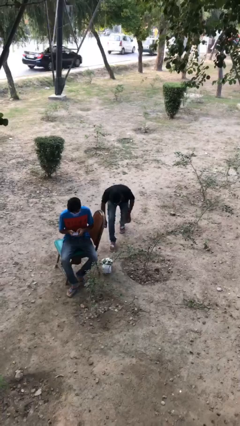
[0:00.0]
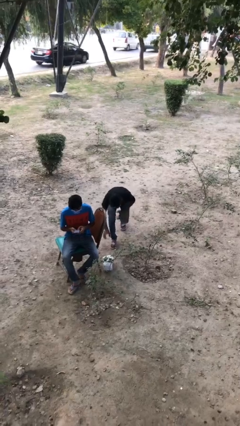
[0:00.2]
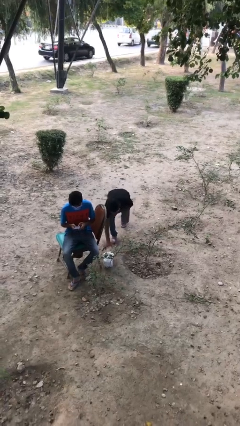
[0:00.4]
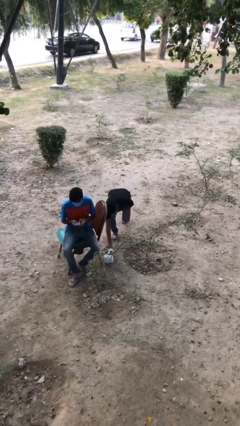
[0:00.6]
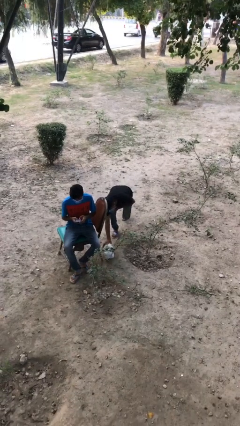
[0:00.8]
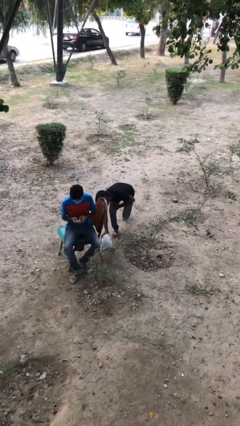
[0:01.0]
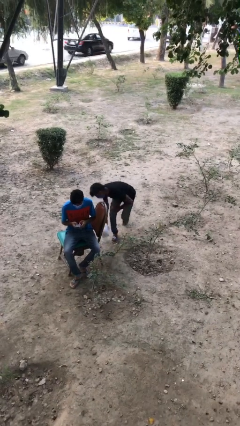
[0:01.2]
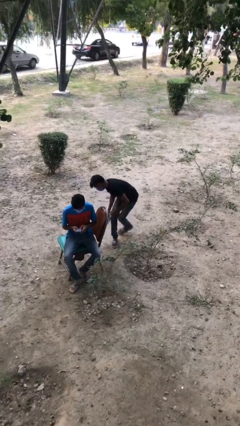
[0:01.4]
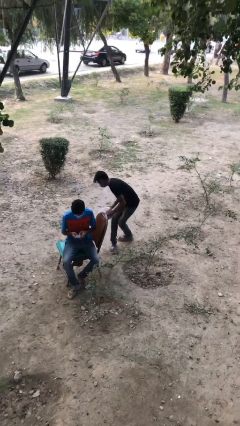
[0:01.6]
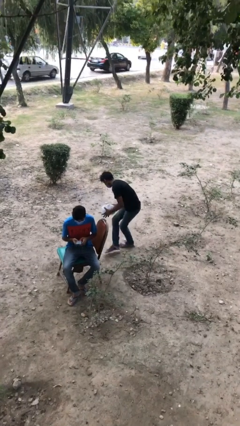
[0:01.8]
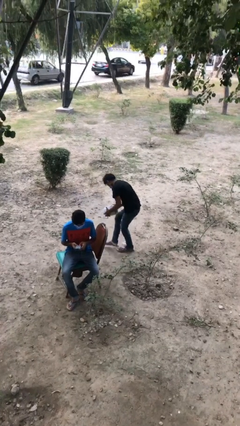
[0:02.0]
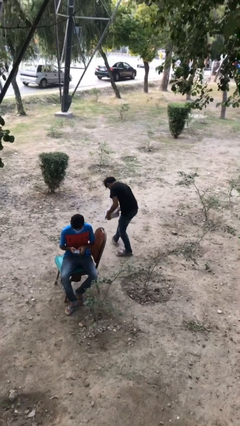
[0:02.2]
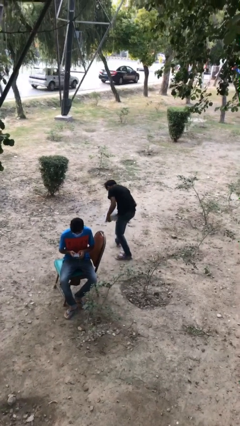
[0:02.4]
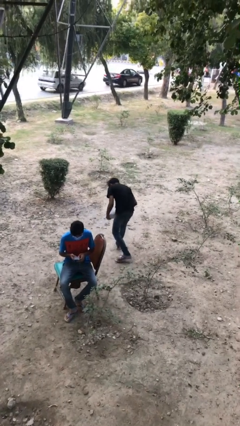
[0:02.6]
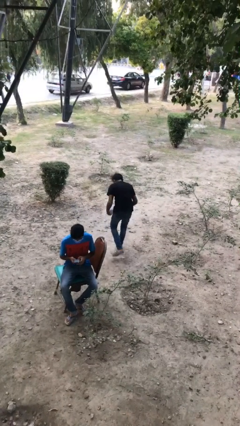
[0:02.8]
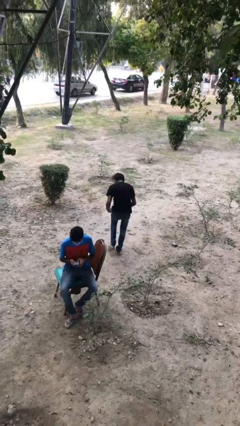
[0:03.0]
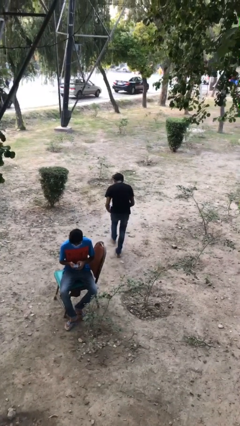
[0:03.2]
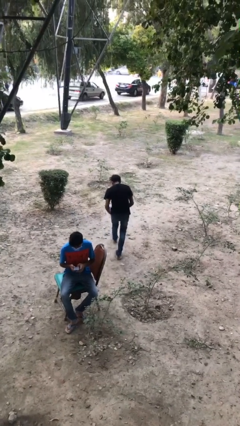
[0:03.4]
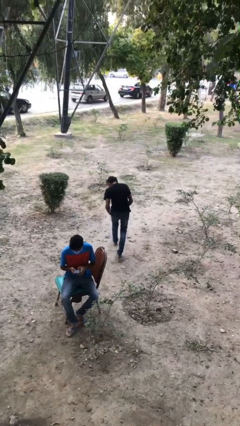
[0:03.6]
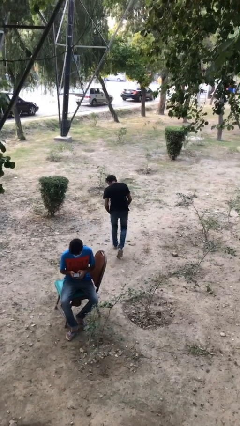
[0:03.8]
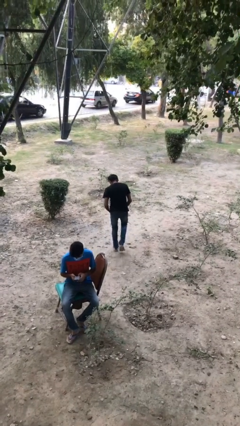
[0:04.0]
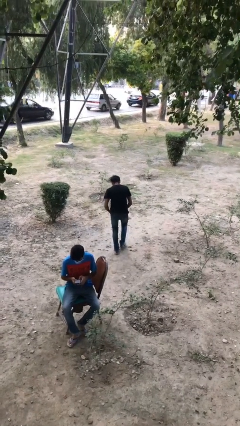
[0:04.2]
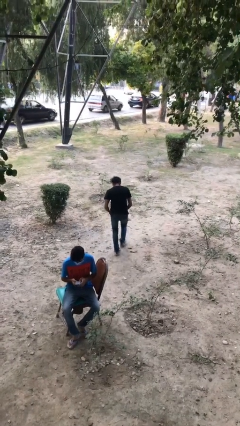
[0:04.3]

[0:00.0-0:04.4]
person steals object from person

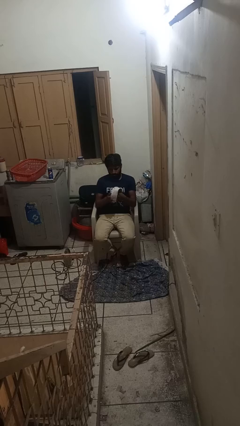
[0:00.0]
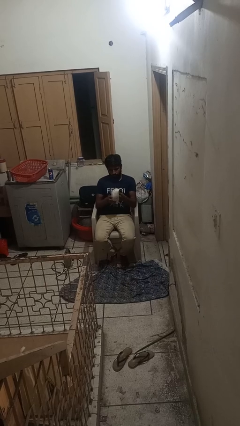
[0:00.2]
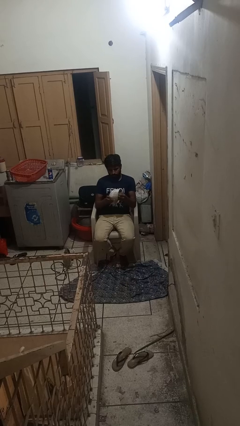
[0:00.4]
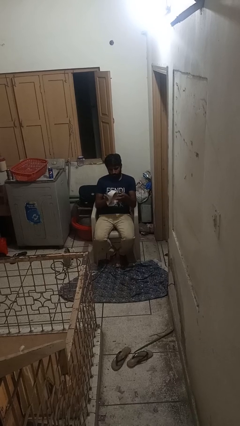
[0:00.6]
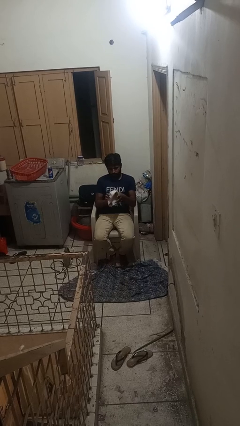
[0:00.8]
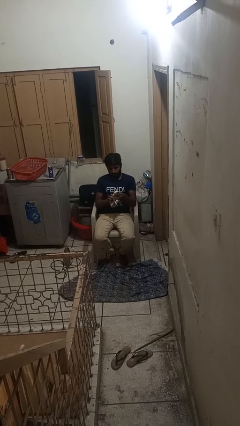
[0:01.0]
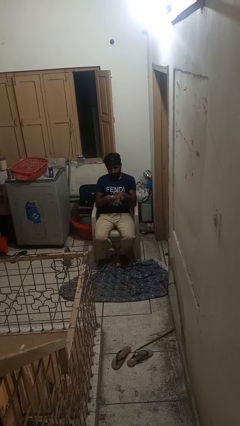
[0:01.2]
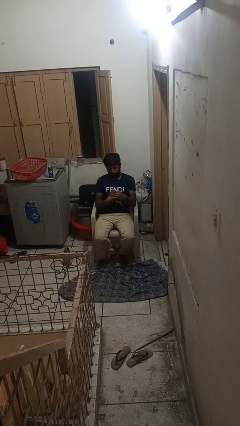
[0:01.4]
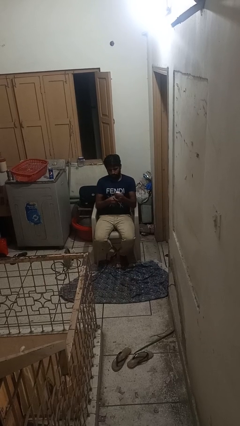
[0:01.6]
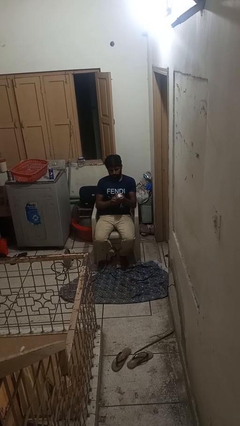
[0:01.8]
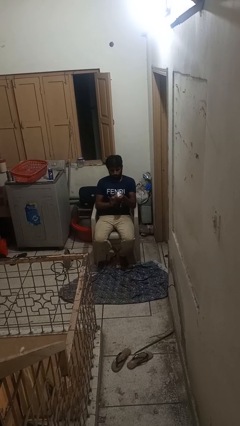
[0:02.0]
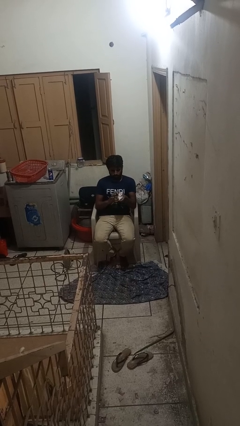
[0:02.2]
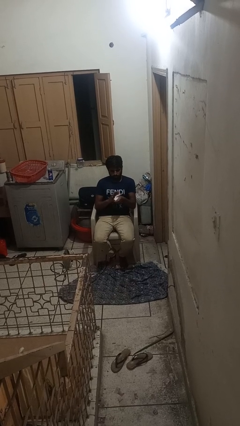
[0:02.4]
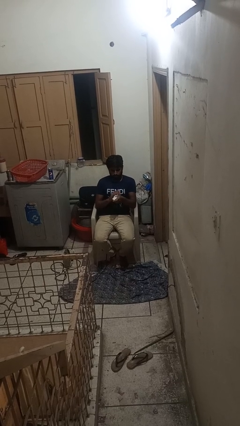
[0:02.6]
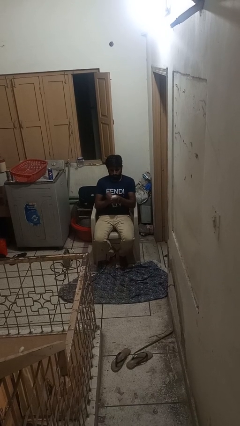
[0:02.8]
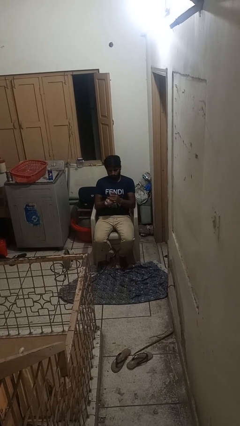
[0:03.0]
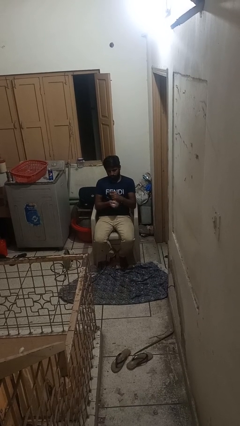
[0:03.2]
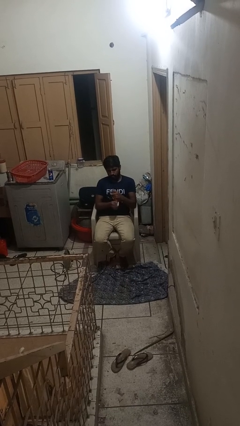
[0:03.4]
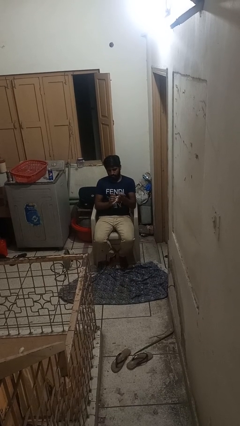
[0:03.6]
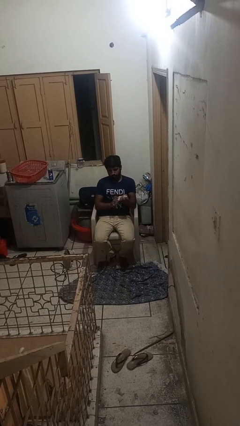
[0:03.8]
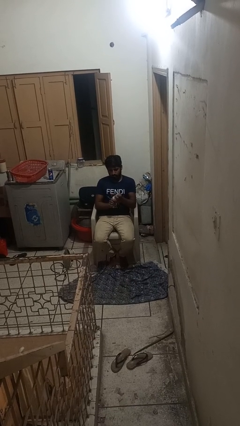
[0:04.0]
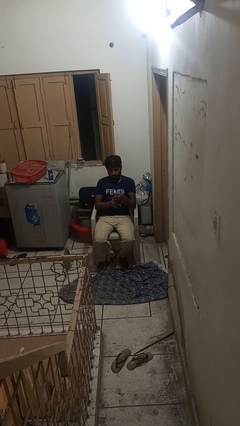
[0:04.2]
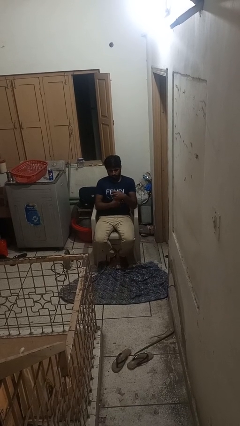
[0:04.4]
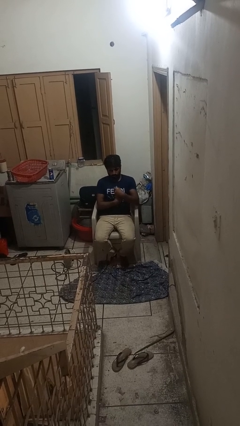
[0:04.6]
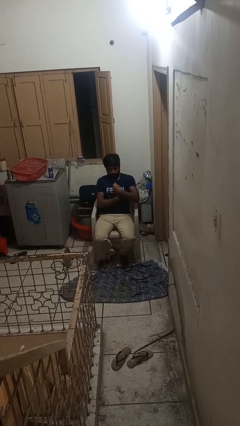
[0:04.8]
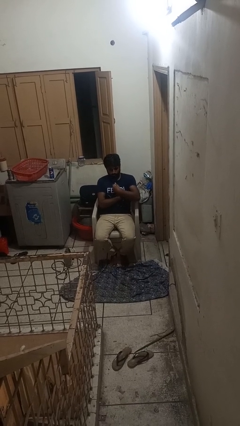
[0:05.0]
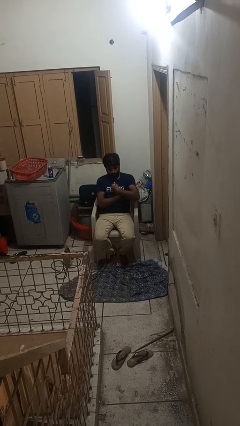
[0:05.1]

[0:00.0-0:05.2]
person squeezes object

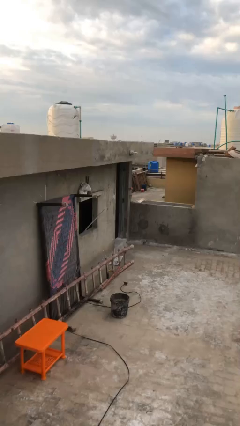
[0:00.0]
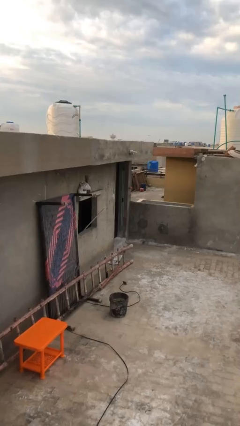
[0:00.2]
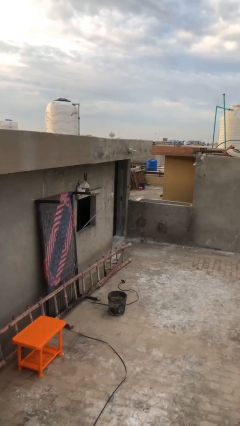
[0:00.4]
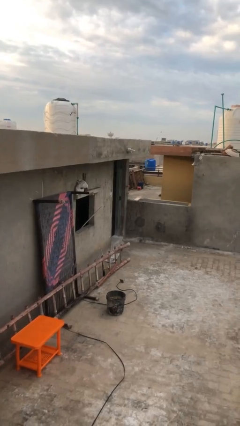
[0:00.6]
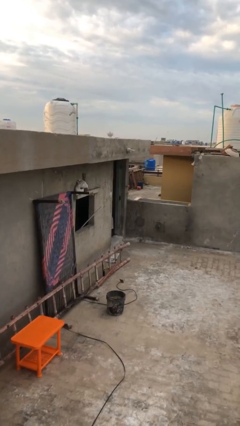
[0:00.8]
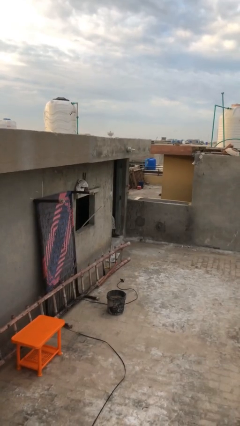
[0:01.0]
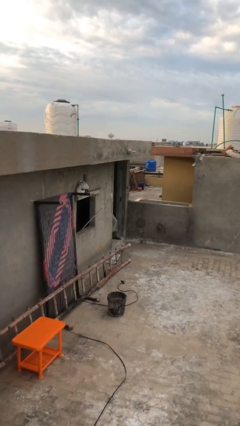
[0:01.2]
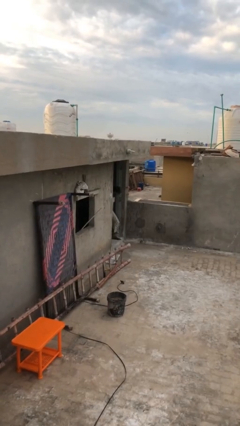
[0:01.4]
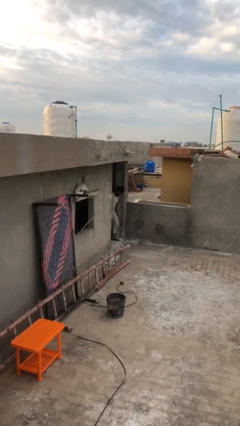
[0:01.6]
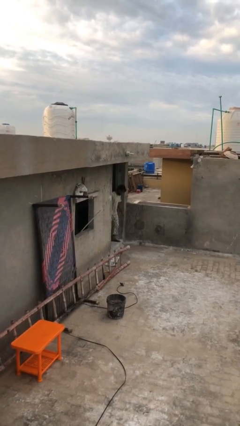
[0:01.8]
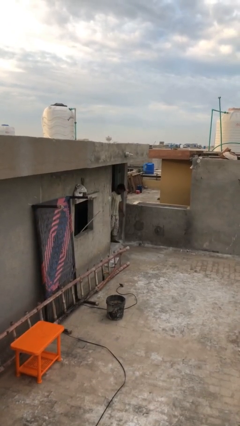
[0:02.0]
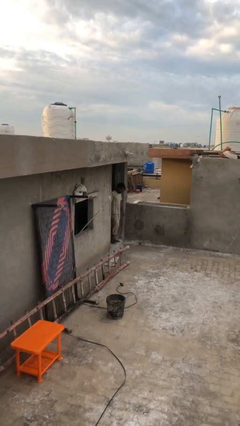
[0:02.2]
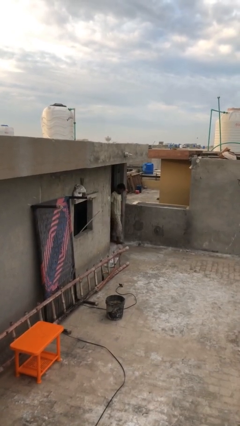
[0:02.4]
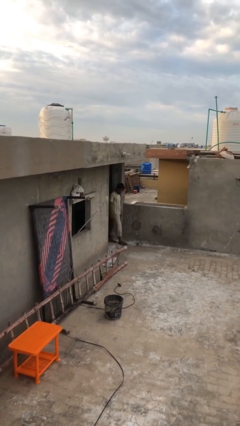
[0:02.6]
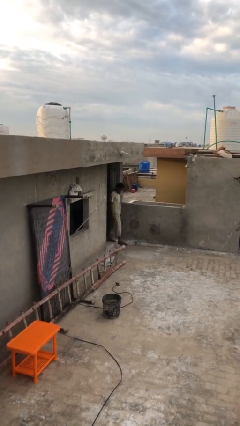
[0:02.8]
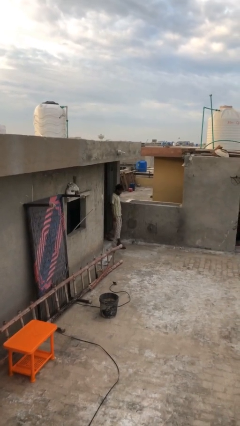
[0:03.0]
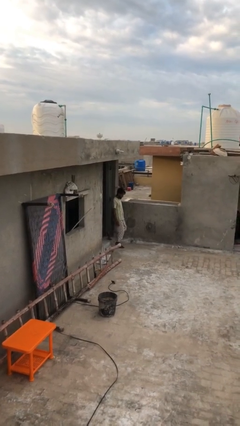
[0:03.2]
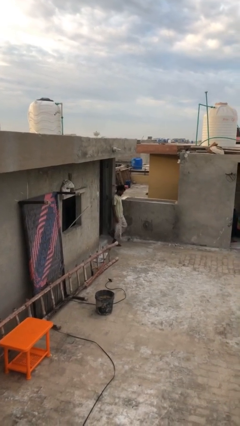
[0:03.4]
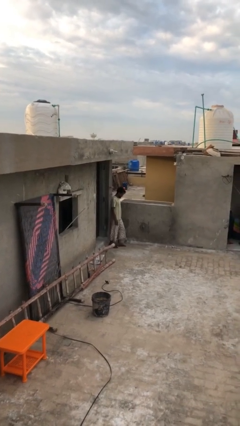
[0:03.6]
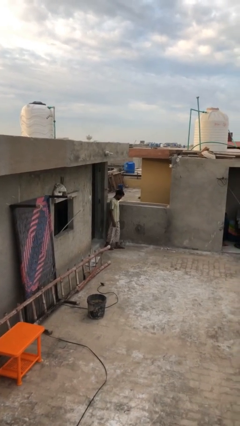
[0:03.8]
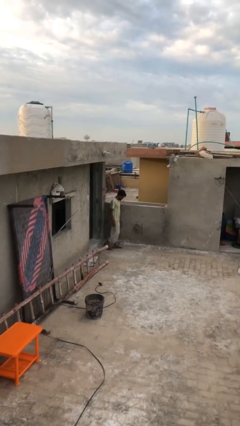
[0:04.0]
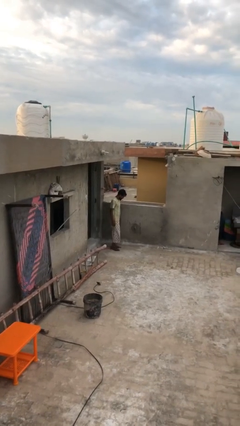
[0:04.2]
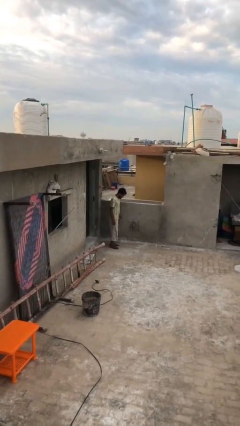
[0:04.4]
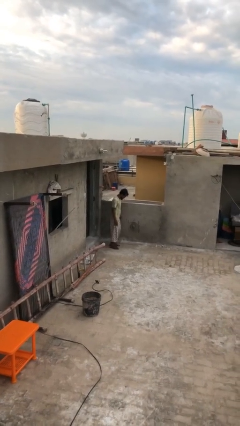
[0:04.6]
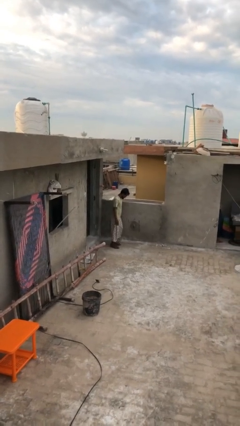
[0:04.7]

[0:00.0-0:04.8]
person enters scene through structure

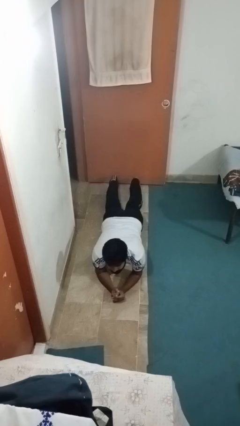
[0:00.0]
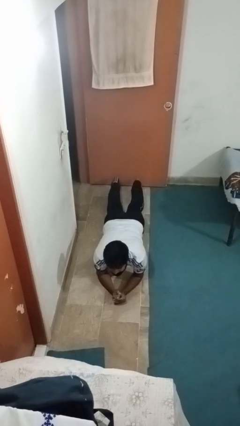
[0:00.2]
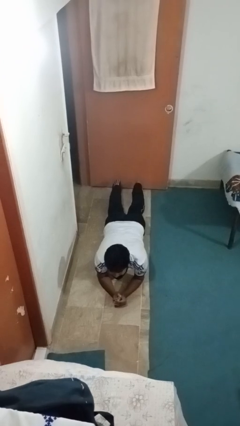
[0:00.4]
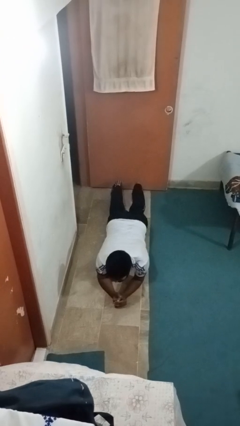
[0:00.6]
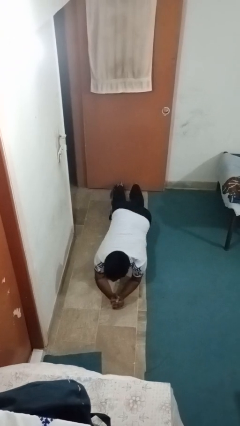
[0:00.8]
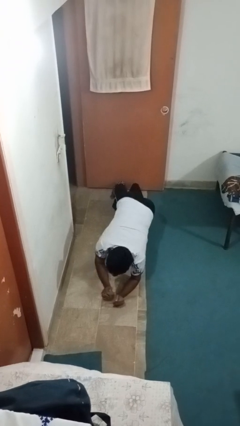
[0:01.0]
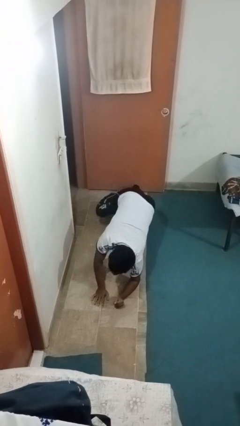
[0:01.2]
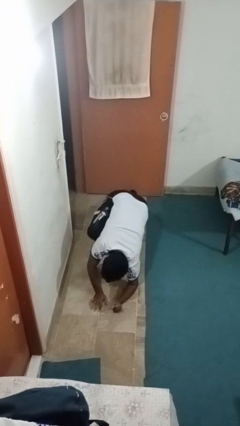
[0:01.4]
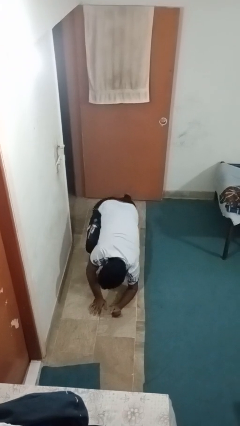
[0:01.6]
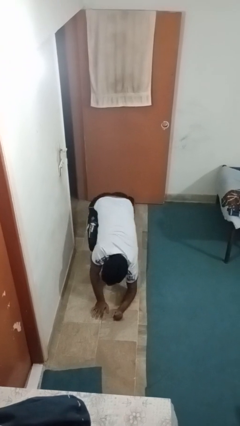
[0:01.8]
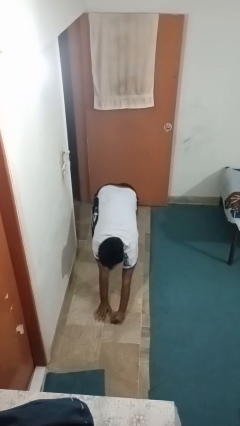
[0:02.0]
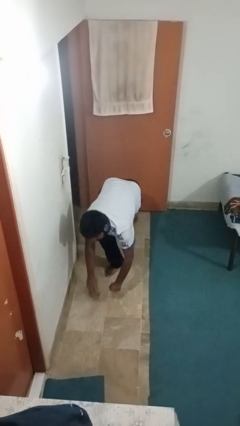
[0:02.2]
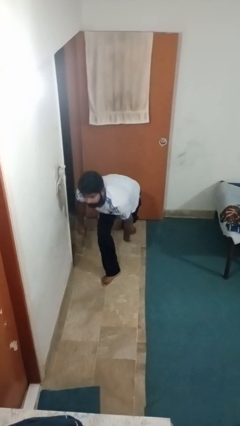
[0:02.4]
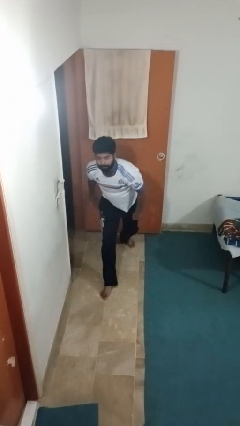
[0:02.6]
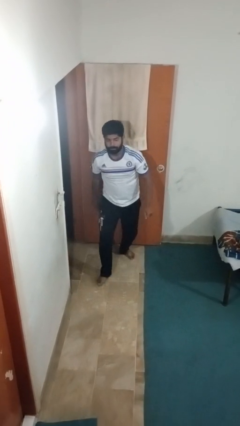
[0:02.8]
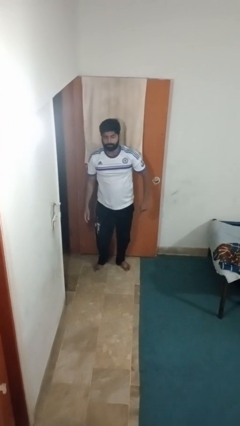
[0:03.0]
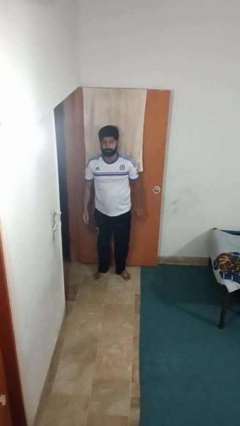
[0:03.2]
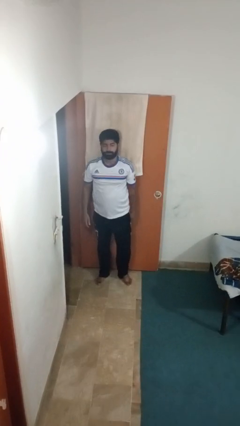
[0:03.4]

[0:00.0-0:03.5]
person stands up from floor
